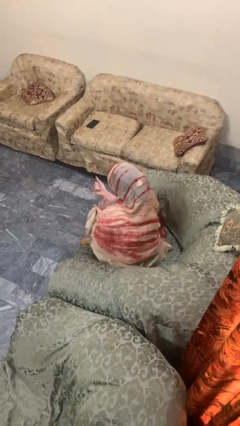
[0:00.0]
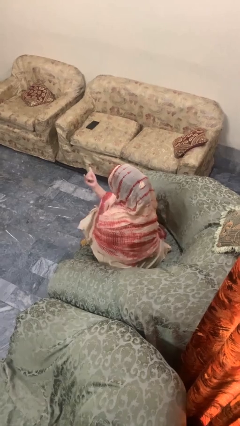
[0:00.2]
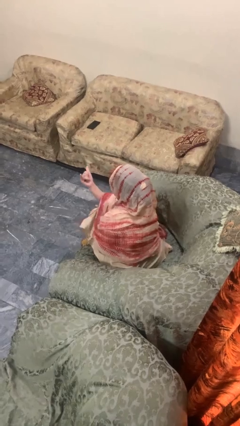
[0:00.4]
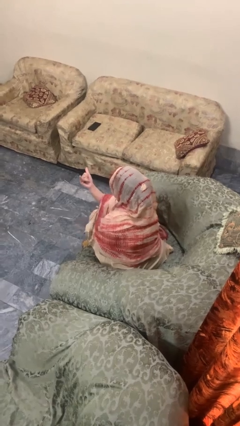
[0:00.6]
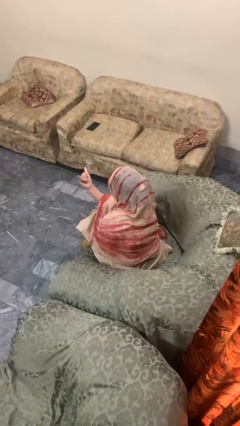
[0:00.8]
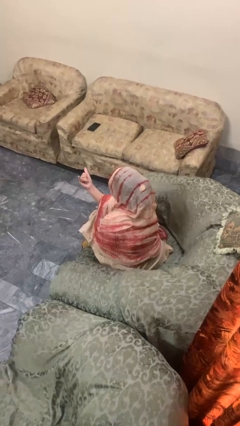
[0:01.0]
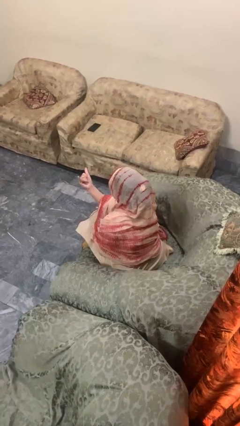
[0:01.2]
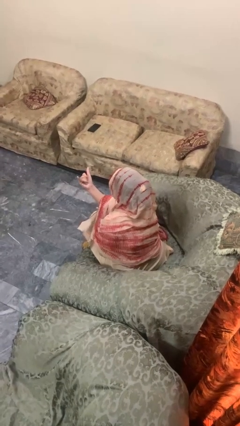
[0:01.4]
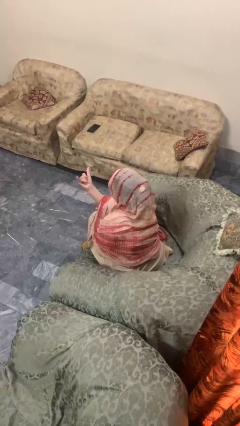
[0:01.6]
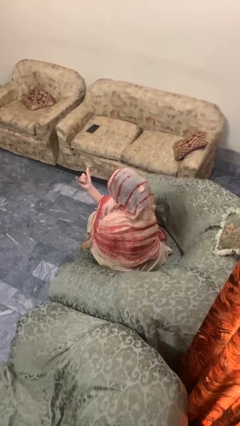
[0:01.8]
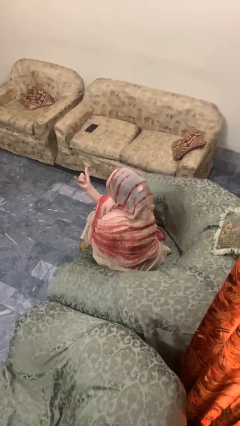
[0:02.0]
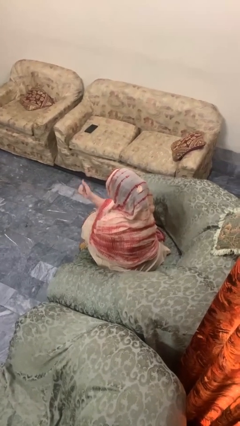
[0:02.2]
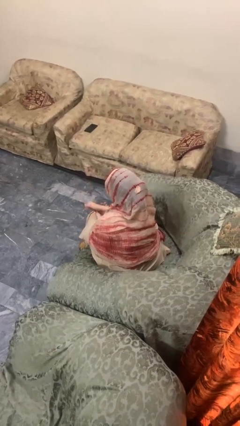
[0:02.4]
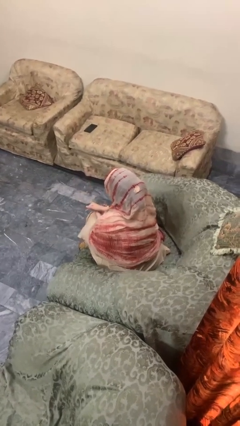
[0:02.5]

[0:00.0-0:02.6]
person gestures hang loose

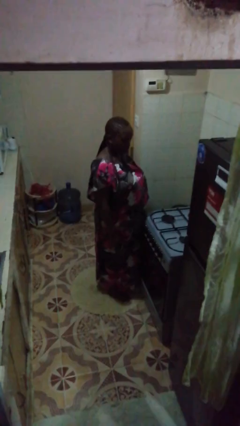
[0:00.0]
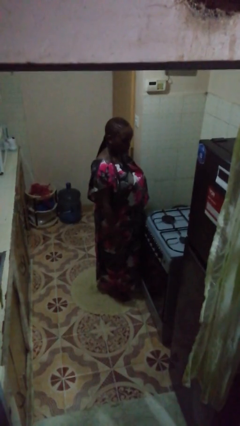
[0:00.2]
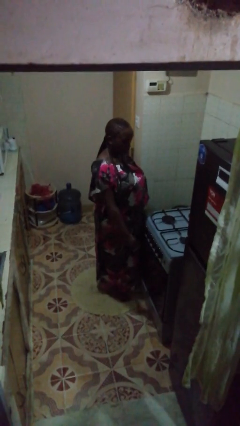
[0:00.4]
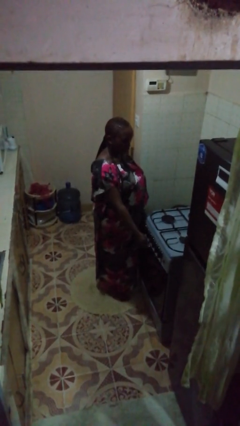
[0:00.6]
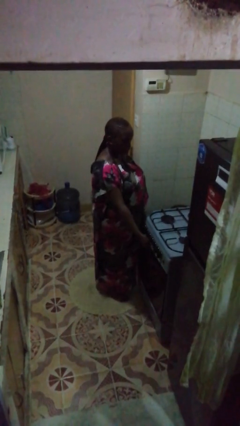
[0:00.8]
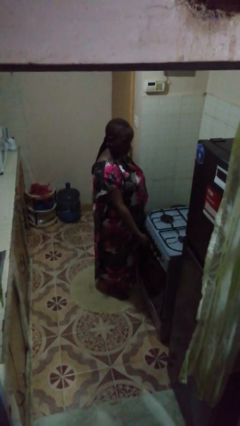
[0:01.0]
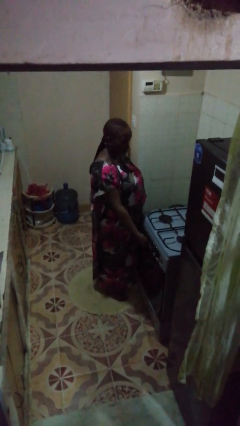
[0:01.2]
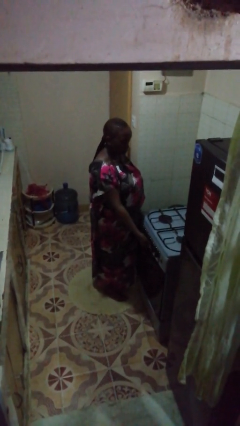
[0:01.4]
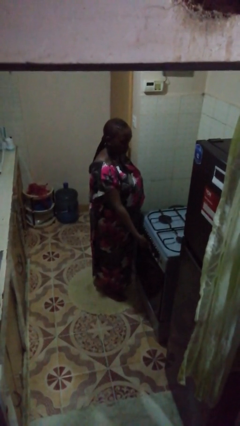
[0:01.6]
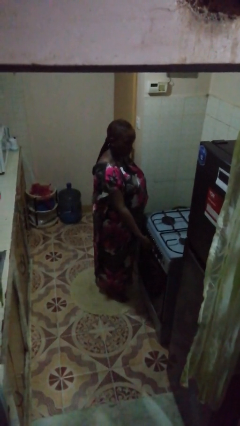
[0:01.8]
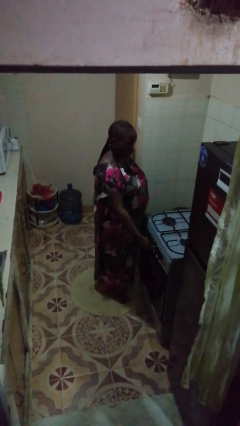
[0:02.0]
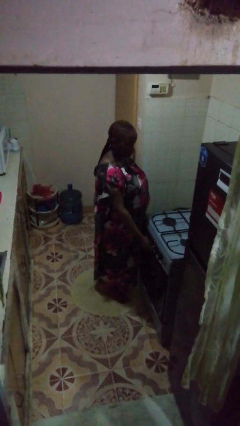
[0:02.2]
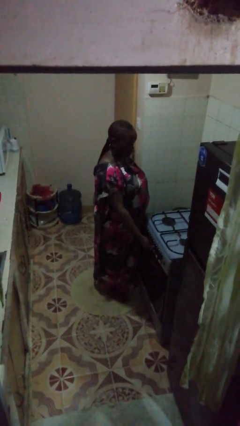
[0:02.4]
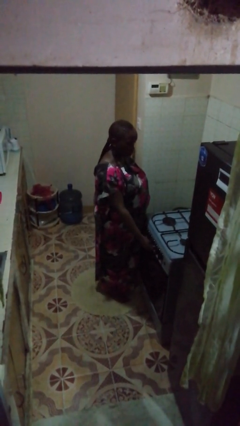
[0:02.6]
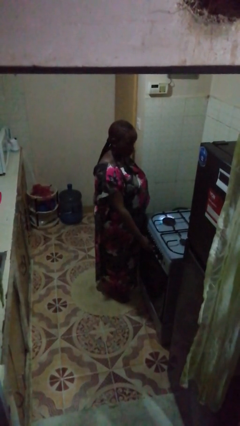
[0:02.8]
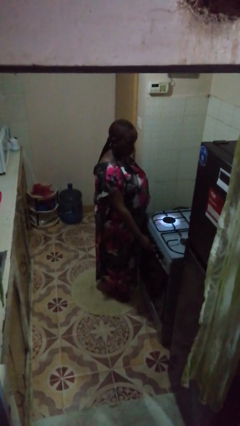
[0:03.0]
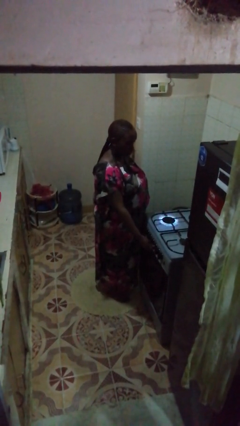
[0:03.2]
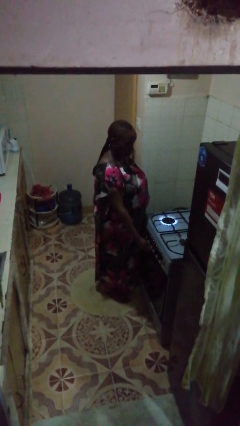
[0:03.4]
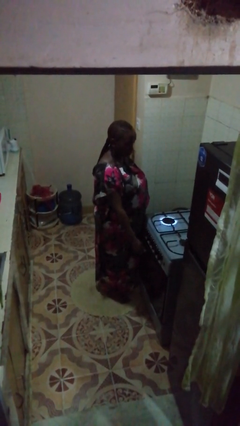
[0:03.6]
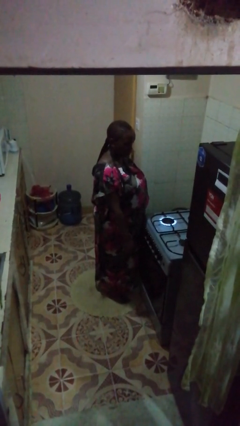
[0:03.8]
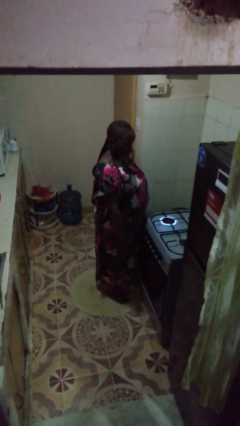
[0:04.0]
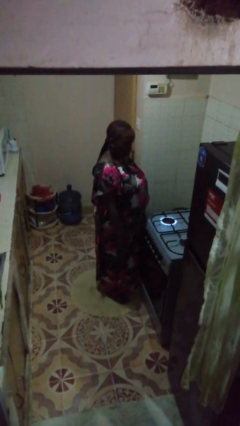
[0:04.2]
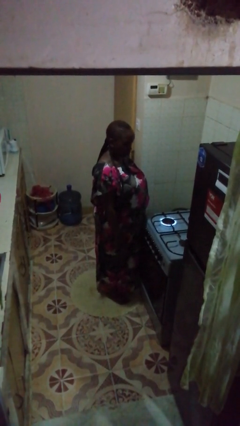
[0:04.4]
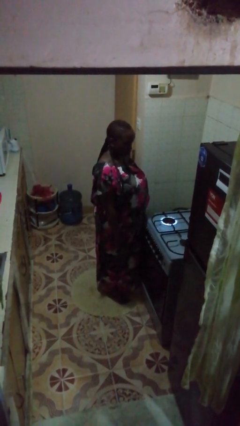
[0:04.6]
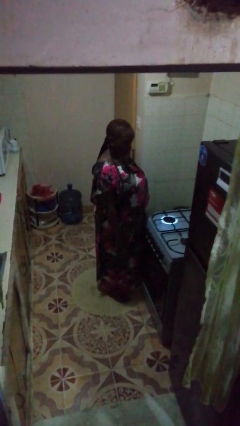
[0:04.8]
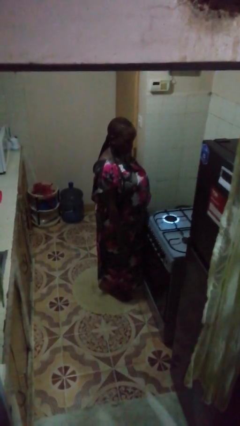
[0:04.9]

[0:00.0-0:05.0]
person turns on stovetop

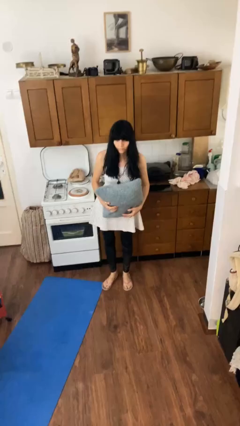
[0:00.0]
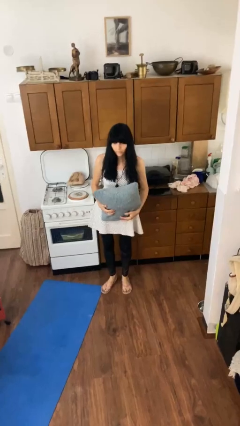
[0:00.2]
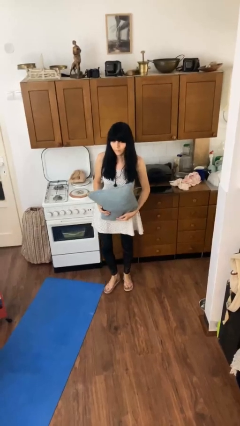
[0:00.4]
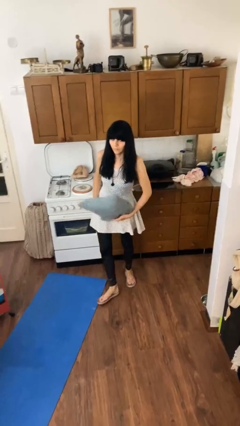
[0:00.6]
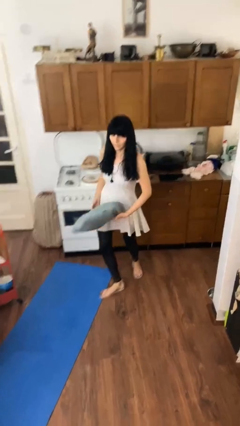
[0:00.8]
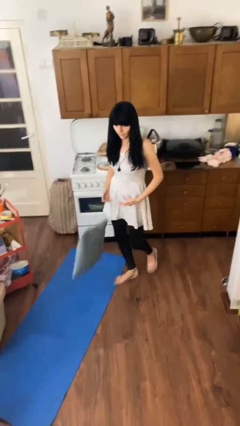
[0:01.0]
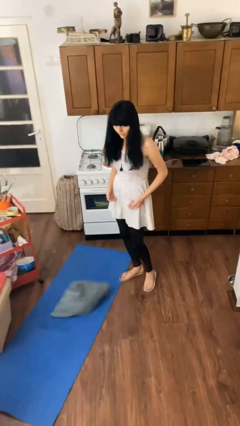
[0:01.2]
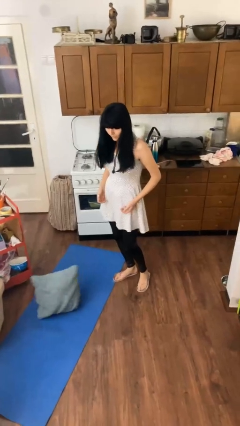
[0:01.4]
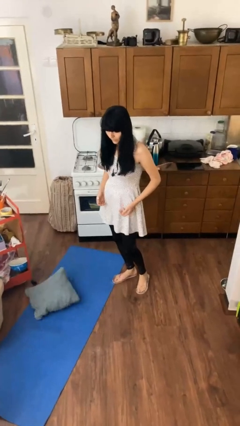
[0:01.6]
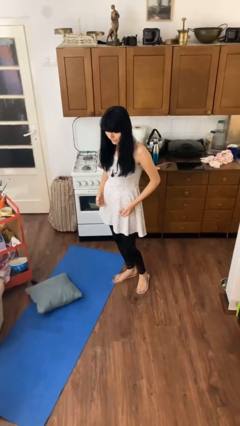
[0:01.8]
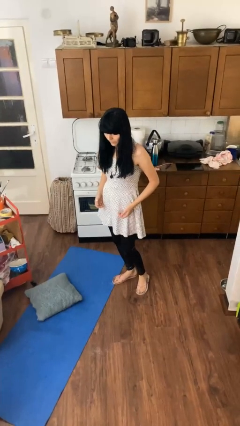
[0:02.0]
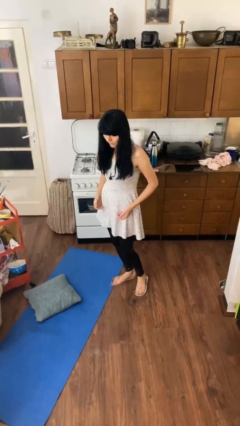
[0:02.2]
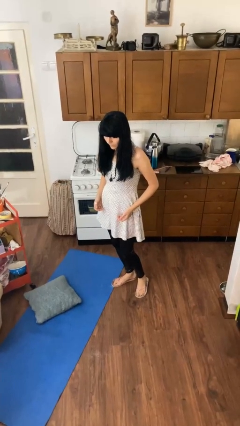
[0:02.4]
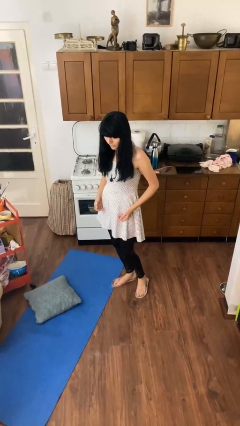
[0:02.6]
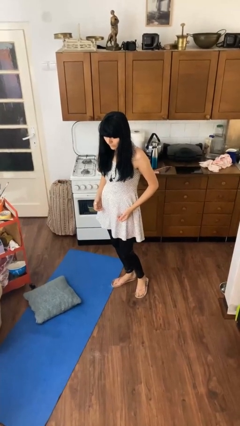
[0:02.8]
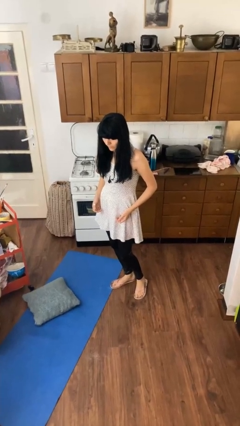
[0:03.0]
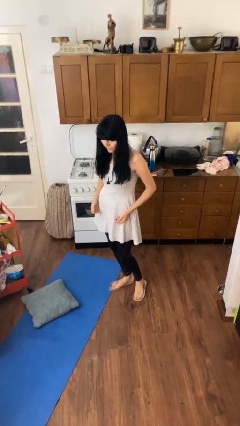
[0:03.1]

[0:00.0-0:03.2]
person drops object

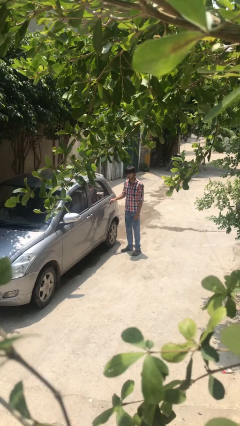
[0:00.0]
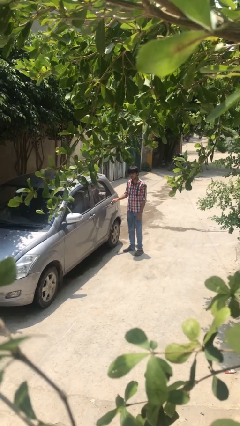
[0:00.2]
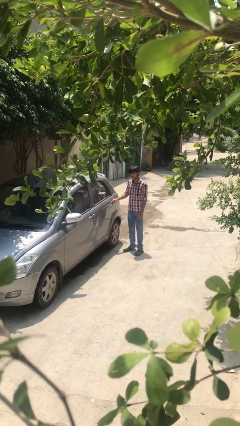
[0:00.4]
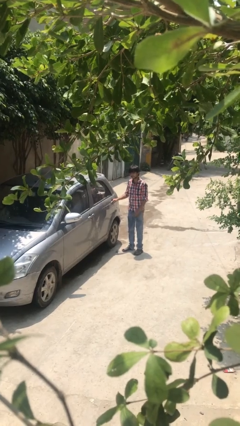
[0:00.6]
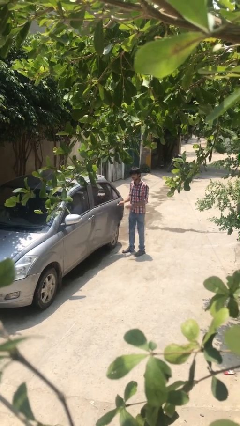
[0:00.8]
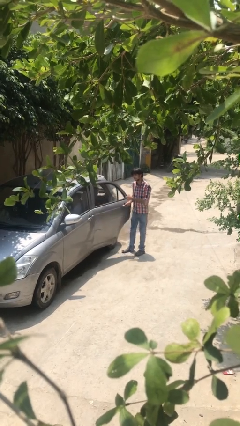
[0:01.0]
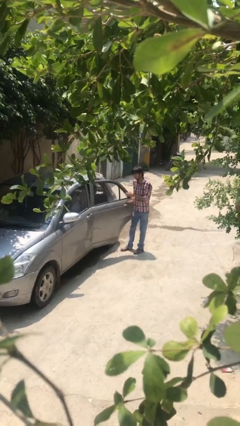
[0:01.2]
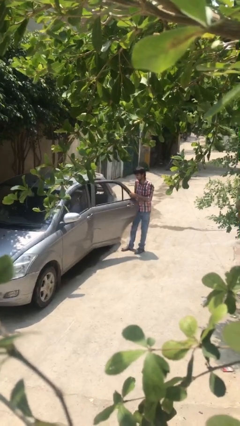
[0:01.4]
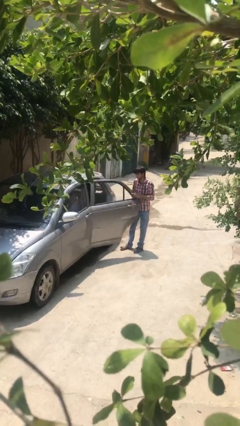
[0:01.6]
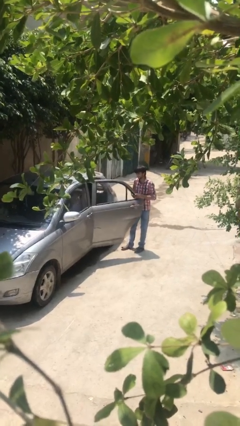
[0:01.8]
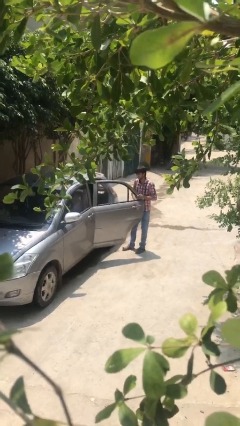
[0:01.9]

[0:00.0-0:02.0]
person opens car door

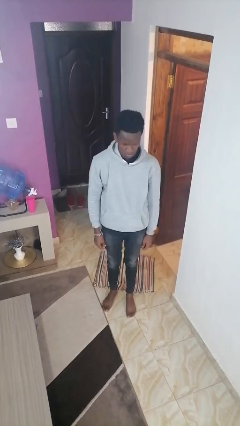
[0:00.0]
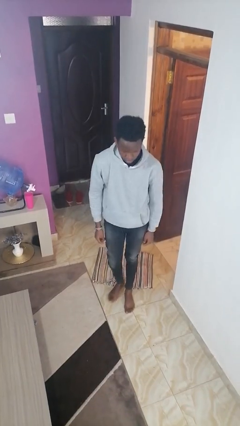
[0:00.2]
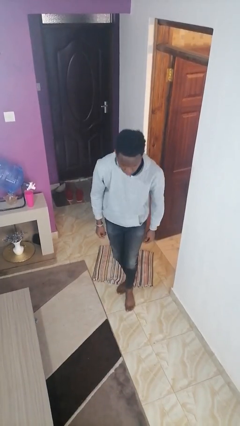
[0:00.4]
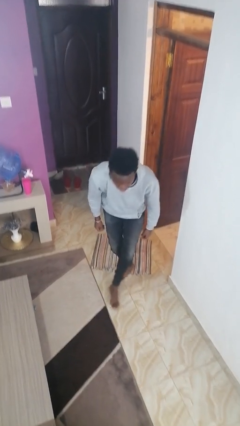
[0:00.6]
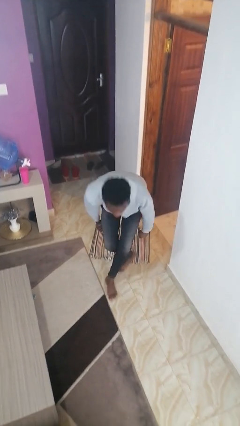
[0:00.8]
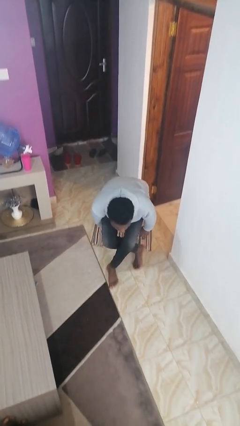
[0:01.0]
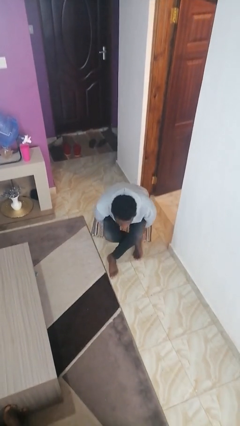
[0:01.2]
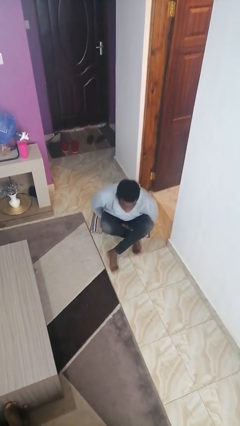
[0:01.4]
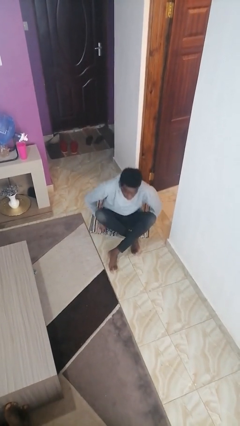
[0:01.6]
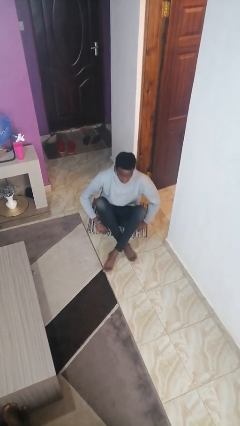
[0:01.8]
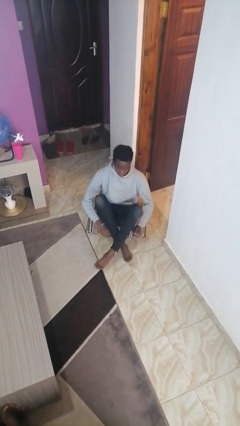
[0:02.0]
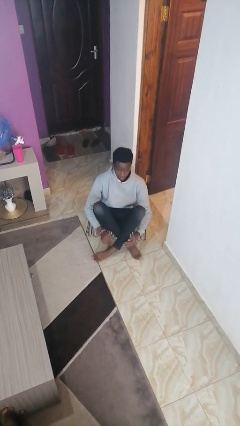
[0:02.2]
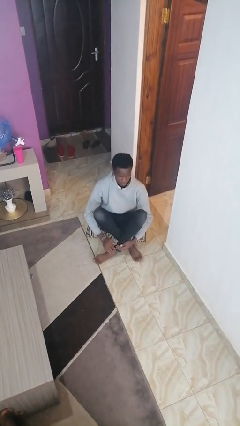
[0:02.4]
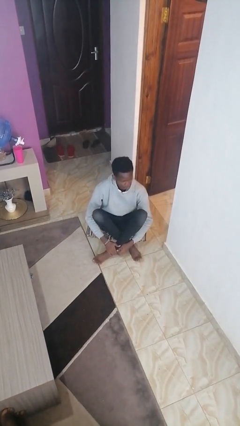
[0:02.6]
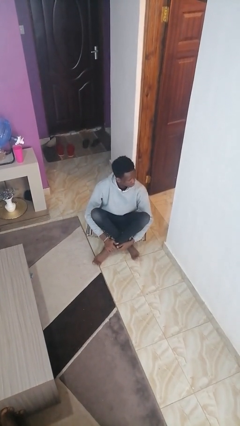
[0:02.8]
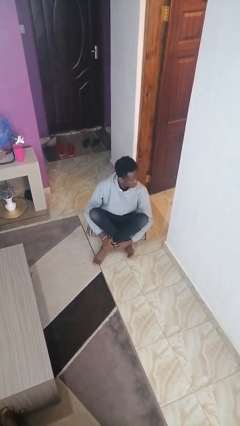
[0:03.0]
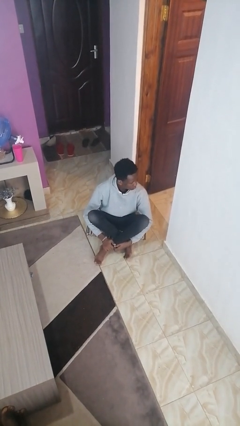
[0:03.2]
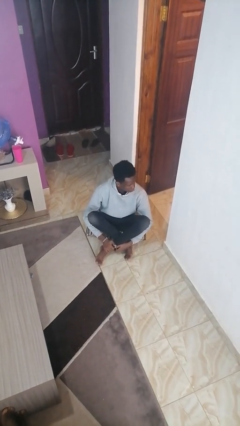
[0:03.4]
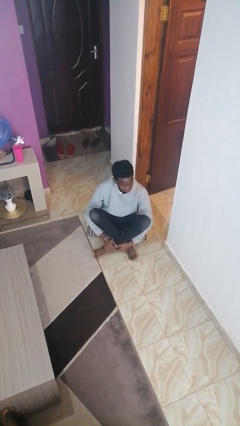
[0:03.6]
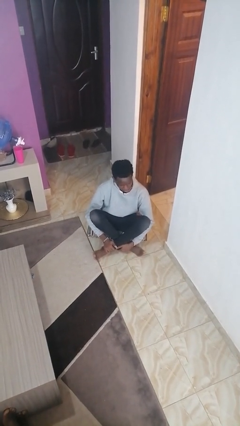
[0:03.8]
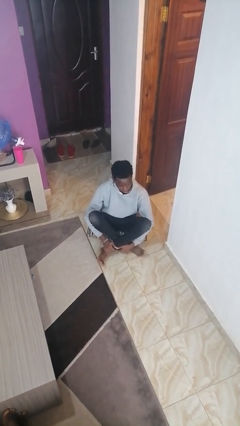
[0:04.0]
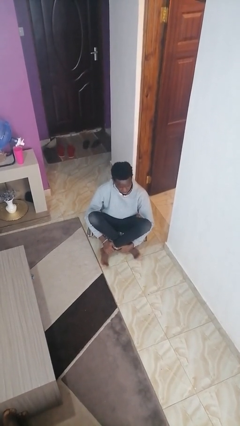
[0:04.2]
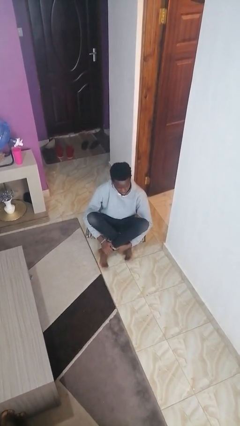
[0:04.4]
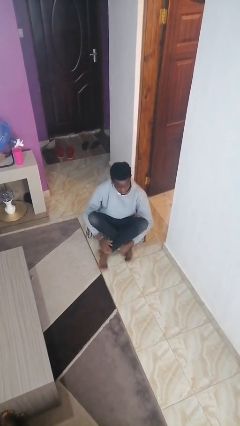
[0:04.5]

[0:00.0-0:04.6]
person sits crisscross
